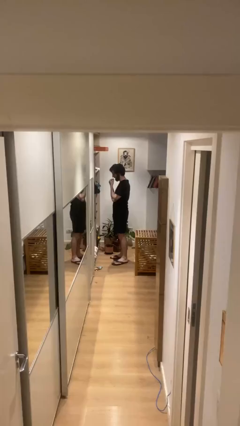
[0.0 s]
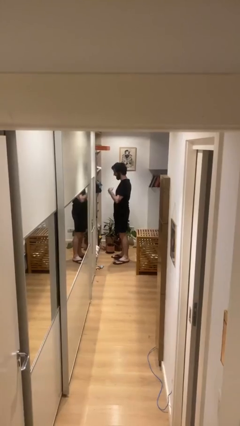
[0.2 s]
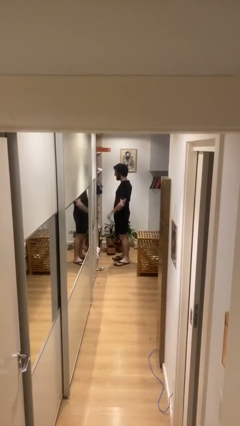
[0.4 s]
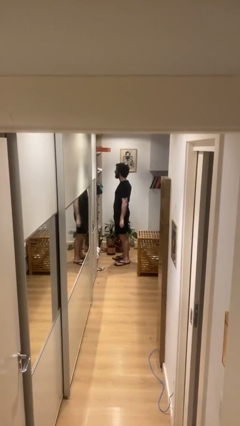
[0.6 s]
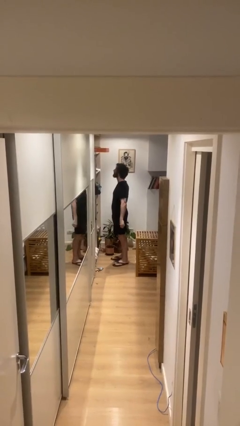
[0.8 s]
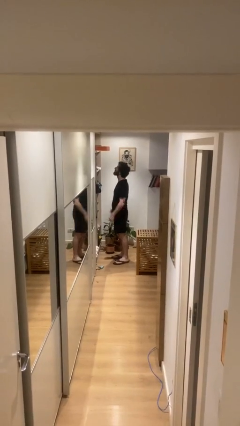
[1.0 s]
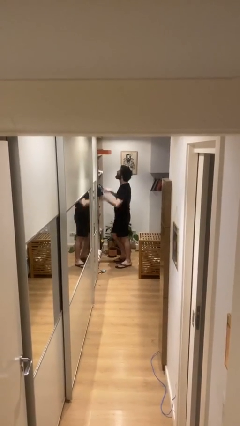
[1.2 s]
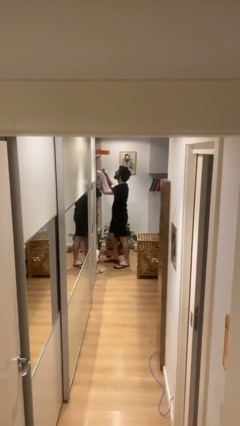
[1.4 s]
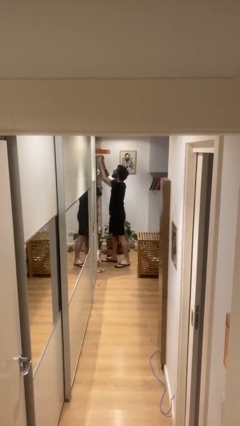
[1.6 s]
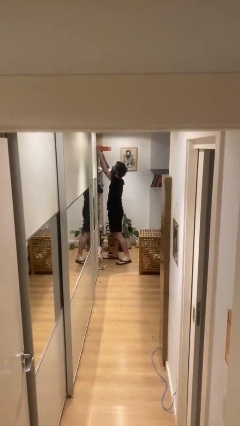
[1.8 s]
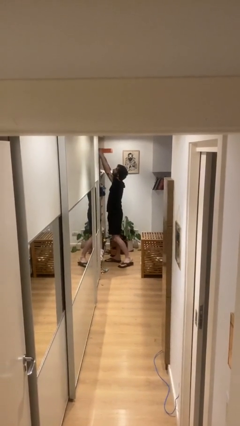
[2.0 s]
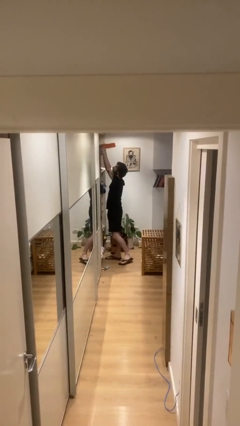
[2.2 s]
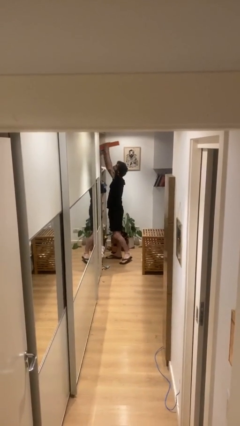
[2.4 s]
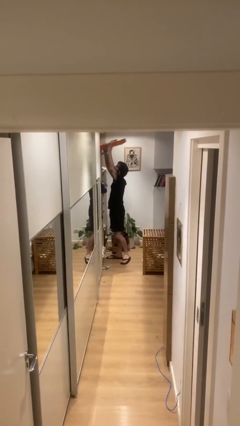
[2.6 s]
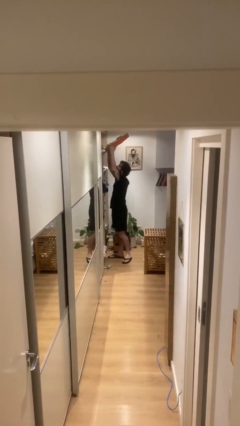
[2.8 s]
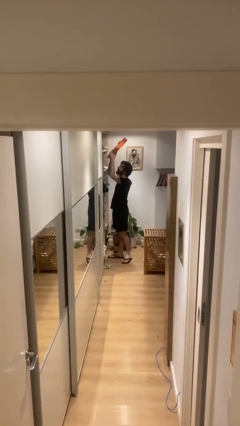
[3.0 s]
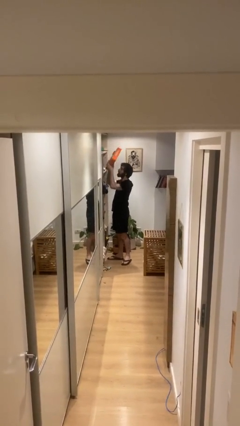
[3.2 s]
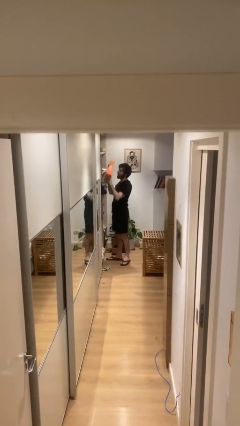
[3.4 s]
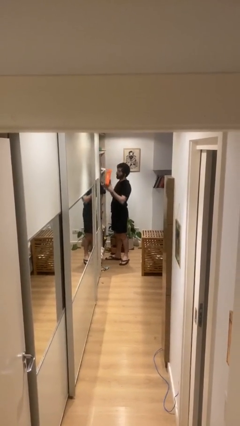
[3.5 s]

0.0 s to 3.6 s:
person picks up object from shelf

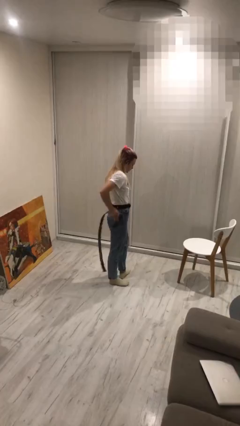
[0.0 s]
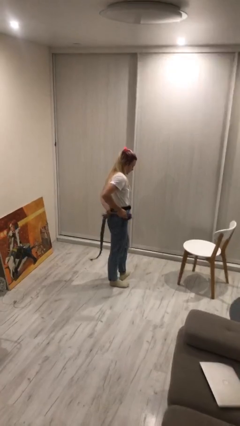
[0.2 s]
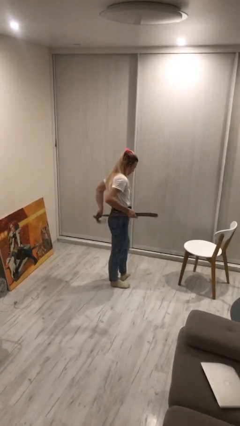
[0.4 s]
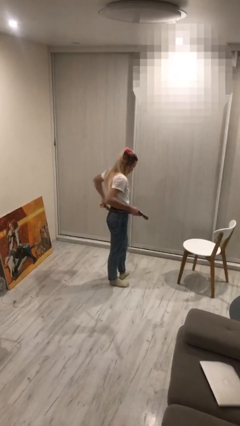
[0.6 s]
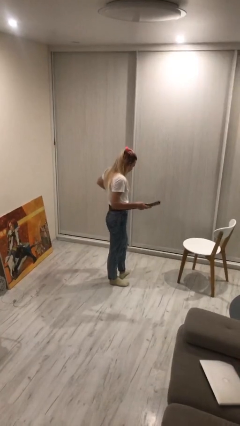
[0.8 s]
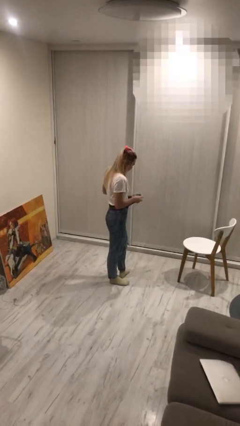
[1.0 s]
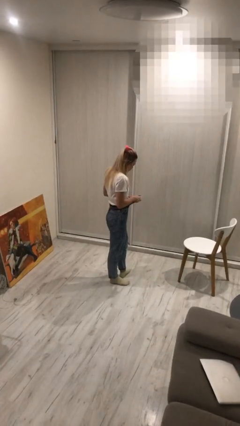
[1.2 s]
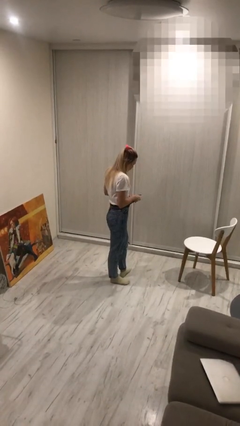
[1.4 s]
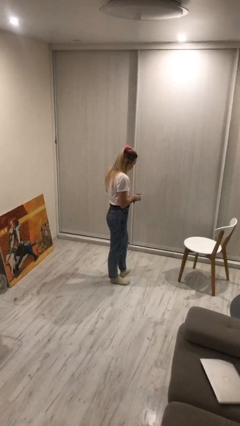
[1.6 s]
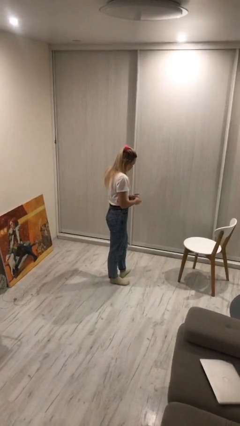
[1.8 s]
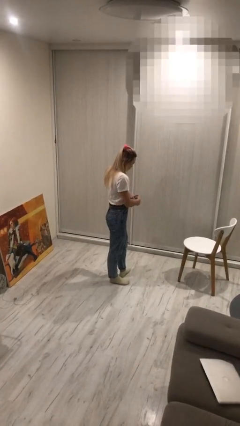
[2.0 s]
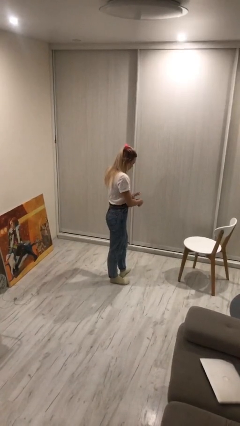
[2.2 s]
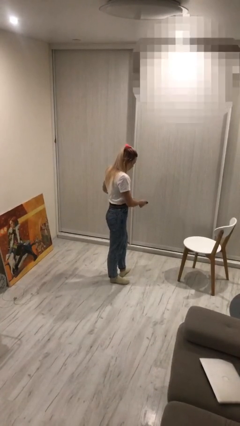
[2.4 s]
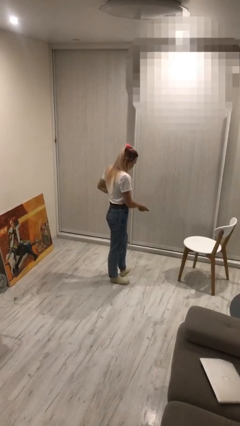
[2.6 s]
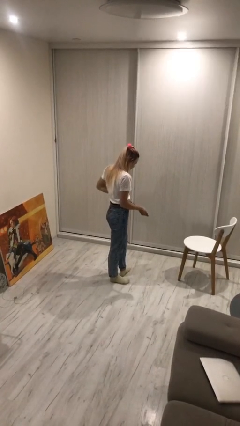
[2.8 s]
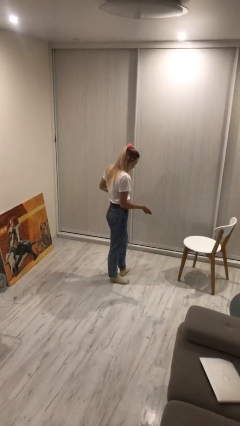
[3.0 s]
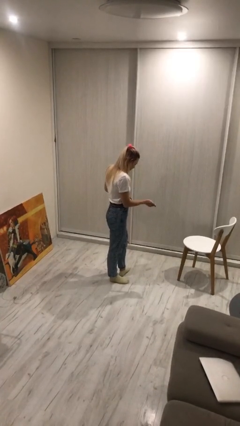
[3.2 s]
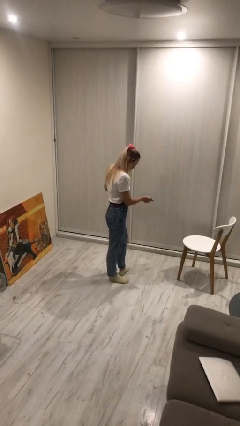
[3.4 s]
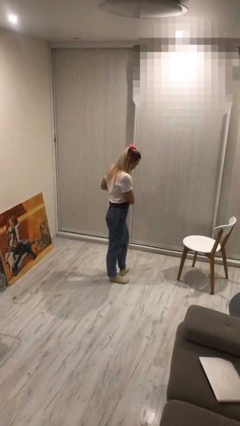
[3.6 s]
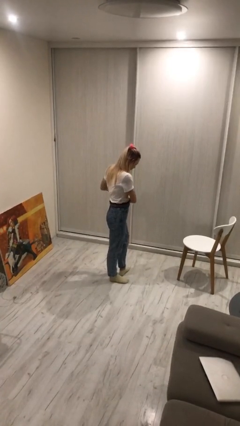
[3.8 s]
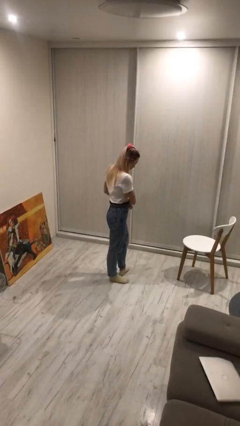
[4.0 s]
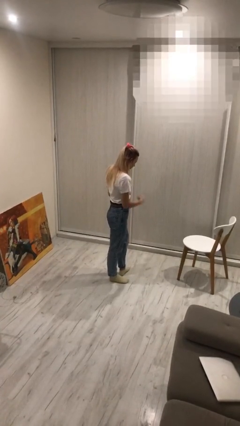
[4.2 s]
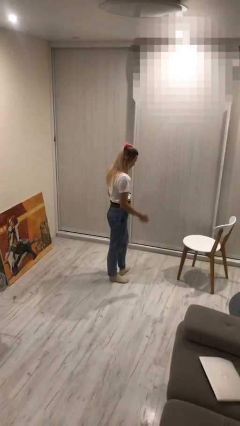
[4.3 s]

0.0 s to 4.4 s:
person puts on belt

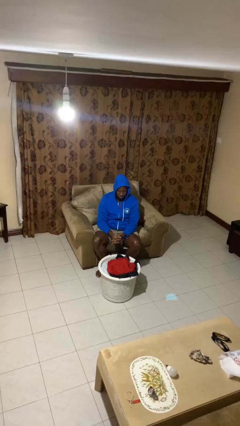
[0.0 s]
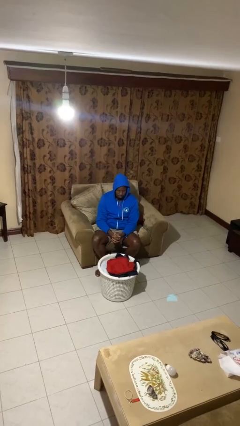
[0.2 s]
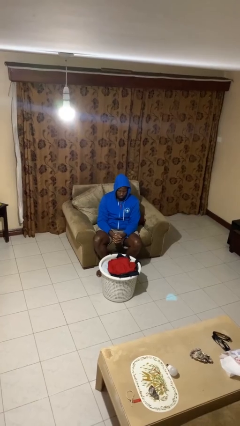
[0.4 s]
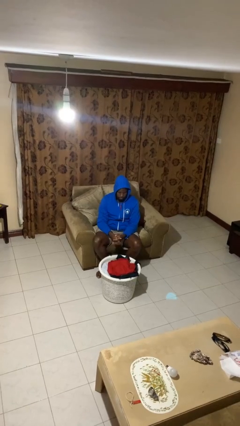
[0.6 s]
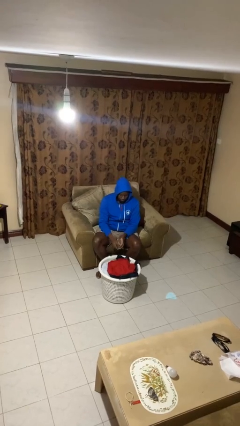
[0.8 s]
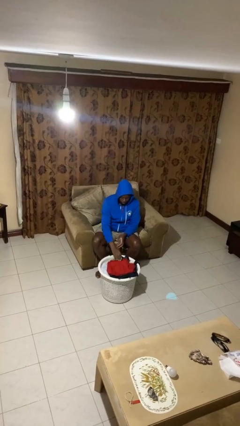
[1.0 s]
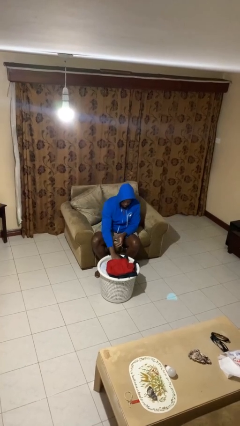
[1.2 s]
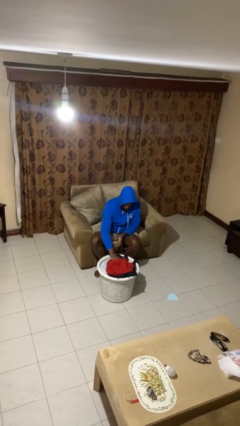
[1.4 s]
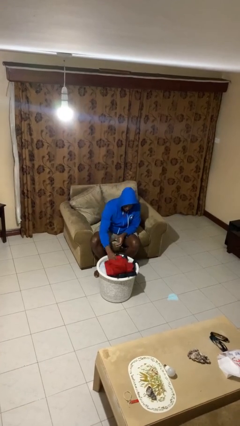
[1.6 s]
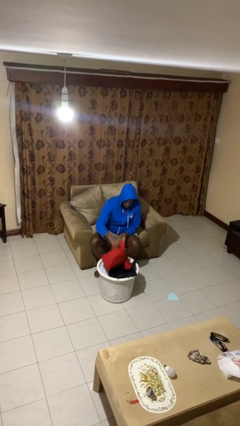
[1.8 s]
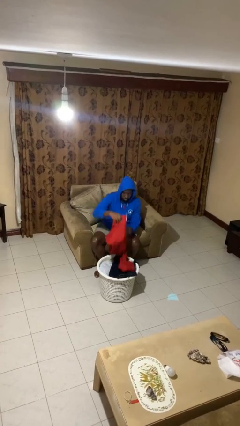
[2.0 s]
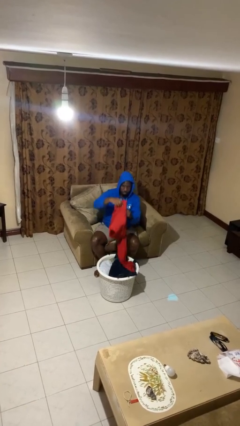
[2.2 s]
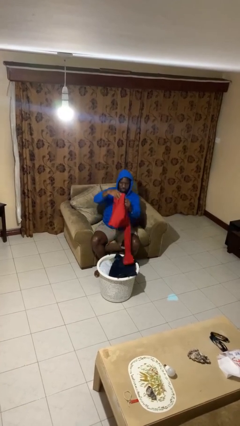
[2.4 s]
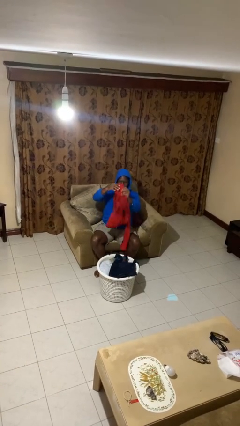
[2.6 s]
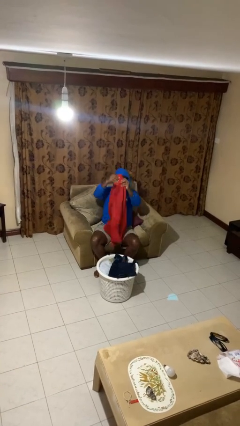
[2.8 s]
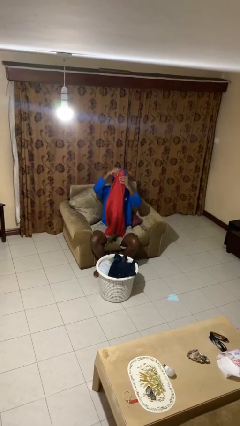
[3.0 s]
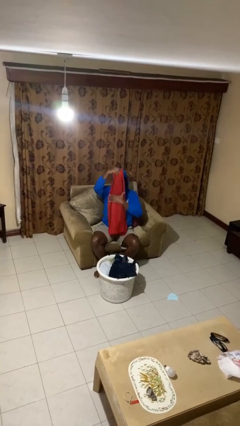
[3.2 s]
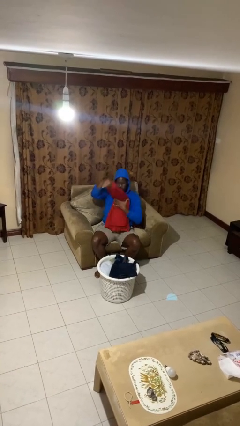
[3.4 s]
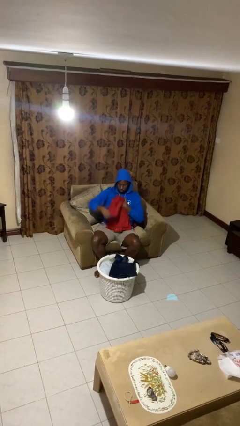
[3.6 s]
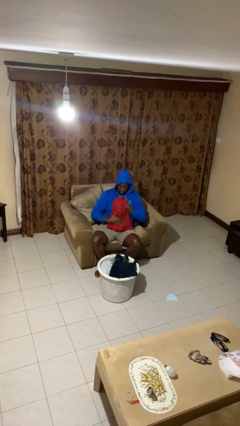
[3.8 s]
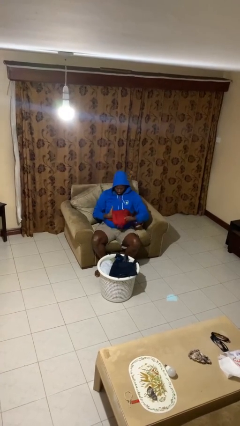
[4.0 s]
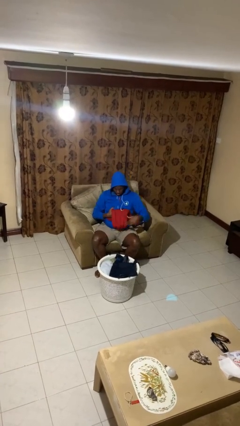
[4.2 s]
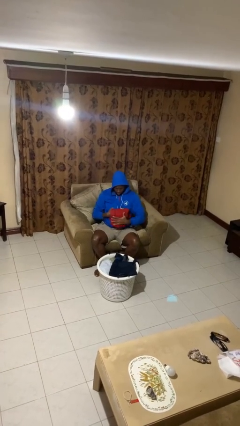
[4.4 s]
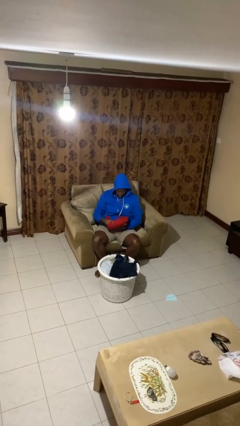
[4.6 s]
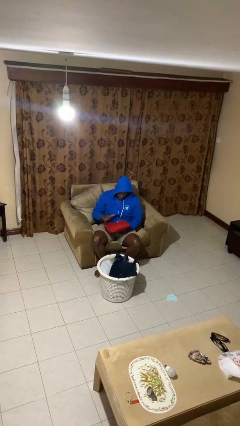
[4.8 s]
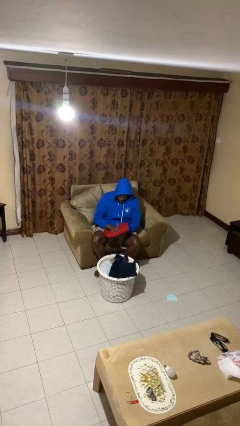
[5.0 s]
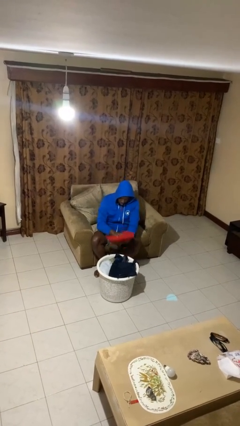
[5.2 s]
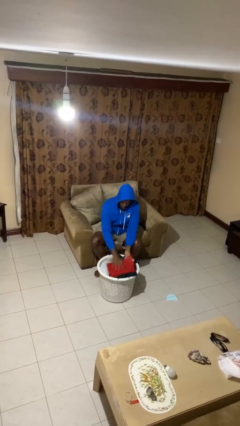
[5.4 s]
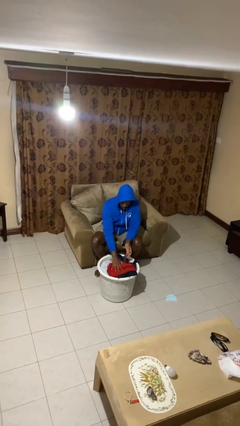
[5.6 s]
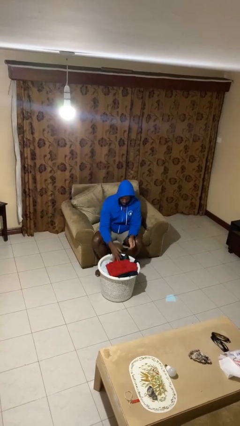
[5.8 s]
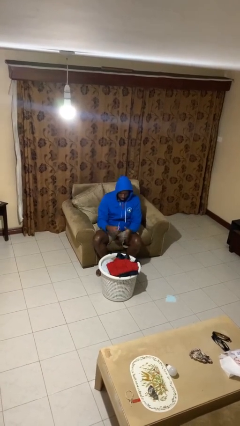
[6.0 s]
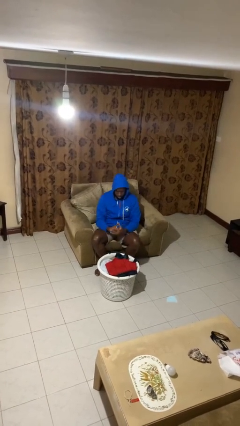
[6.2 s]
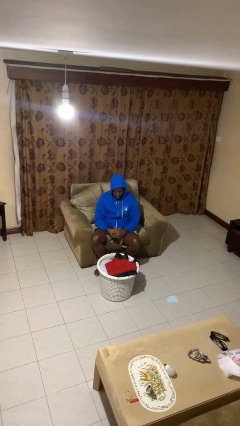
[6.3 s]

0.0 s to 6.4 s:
person folds shirt

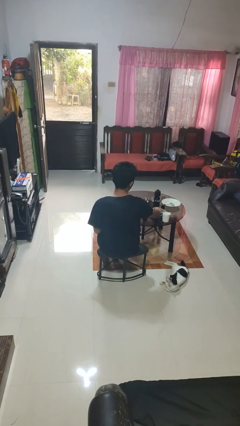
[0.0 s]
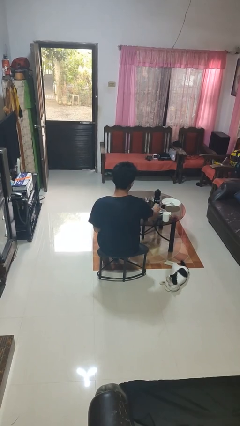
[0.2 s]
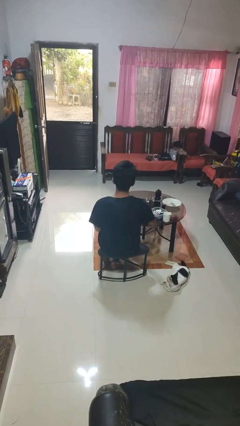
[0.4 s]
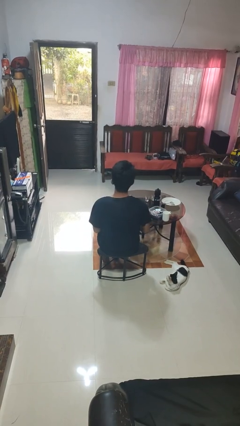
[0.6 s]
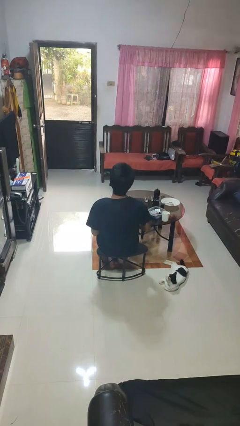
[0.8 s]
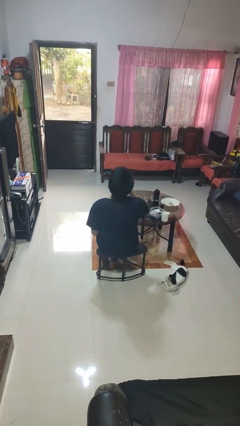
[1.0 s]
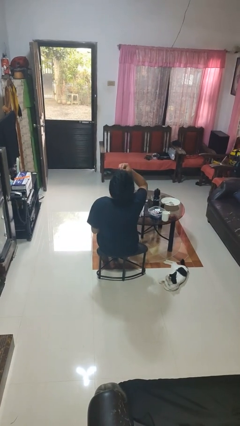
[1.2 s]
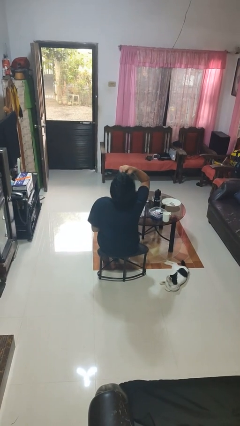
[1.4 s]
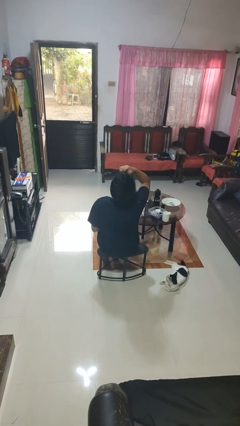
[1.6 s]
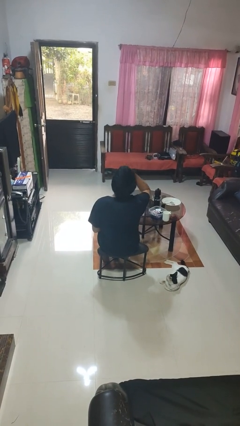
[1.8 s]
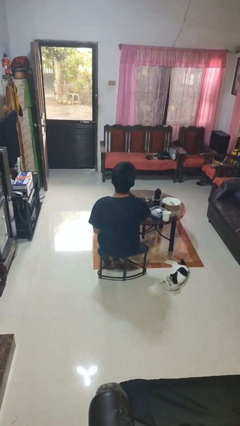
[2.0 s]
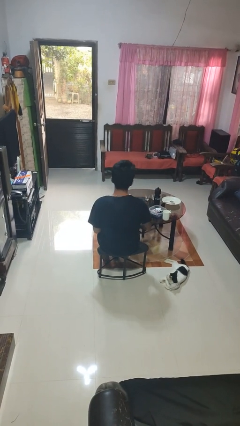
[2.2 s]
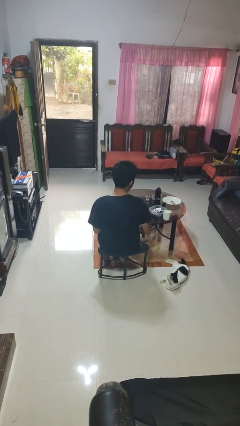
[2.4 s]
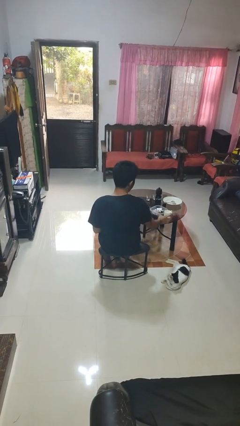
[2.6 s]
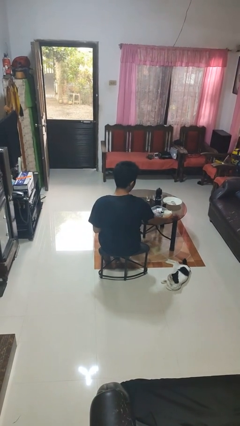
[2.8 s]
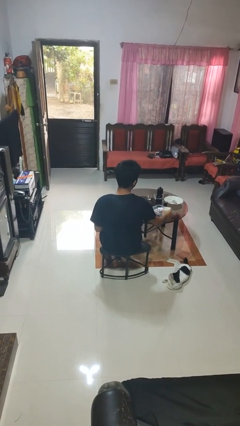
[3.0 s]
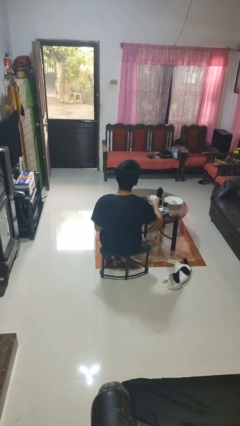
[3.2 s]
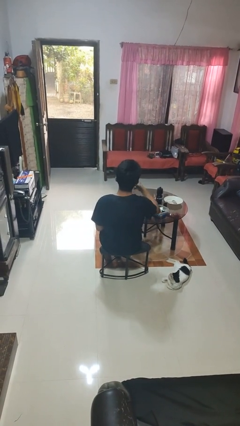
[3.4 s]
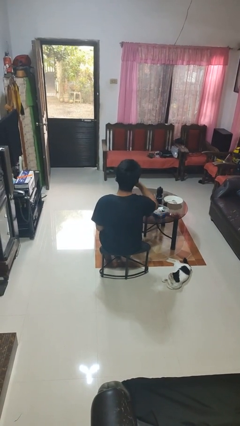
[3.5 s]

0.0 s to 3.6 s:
person takes medicine pills
